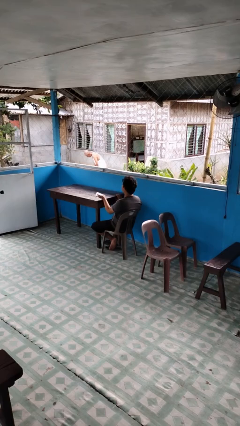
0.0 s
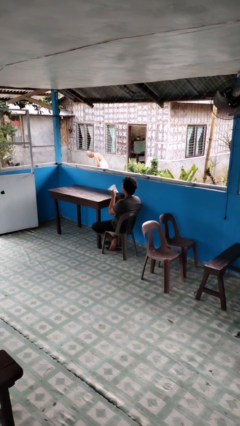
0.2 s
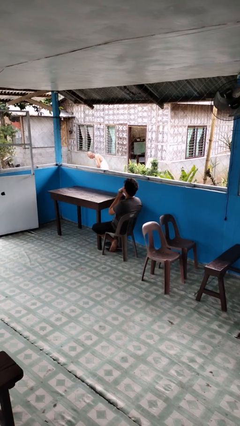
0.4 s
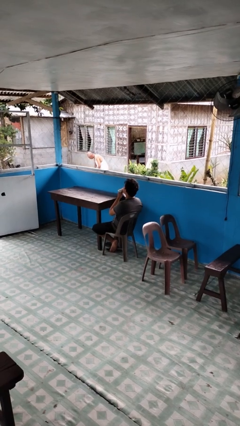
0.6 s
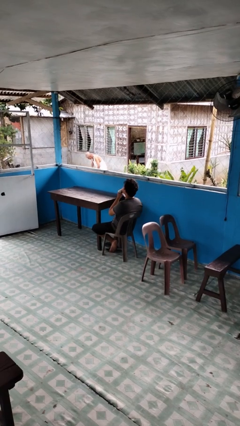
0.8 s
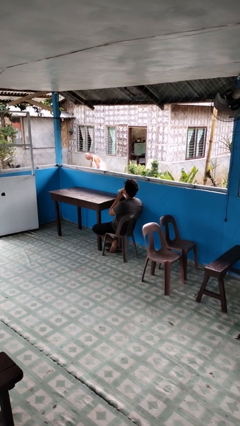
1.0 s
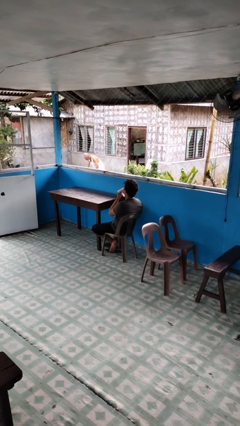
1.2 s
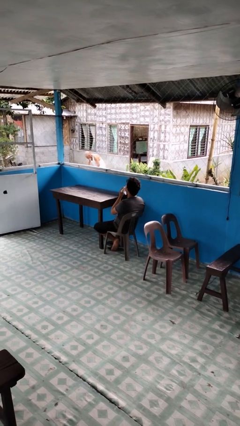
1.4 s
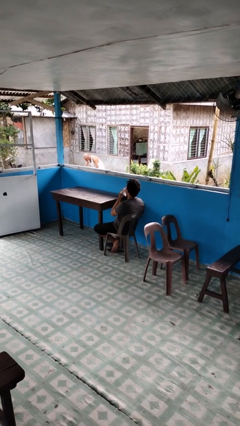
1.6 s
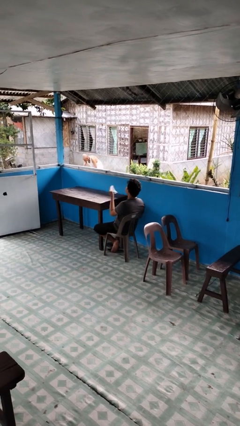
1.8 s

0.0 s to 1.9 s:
person wipes mouth with napkin

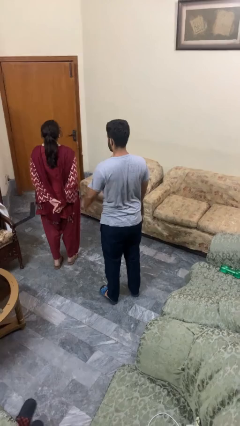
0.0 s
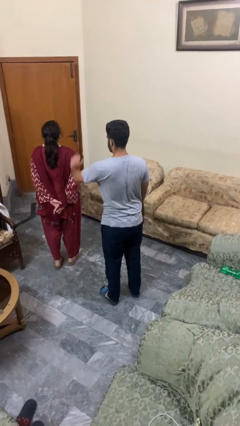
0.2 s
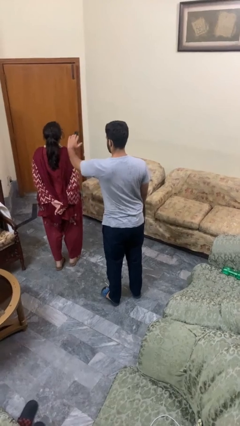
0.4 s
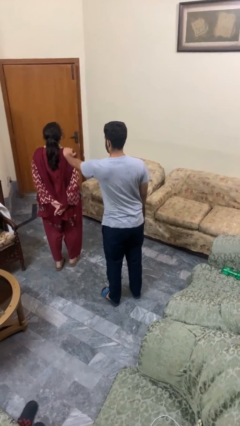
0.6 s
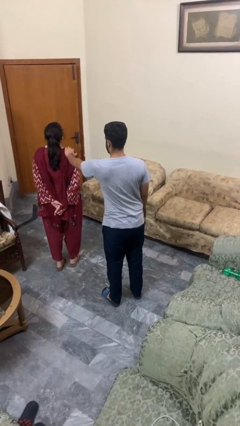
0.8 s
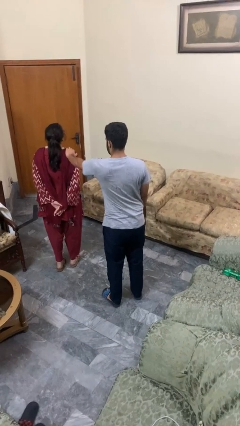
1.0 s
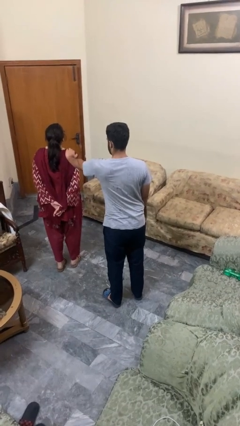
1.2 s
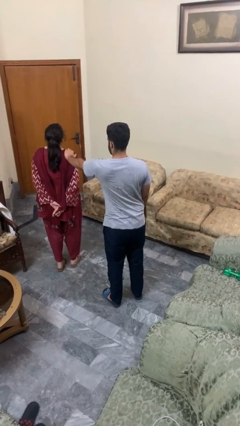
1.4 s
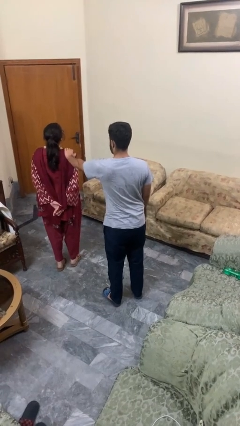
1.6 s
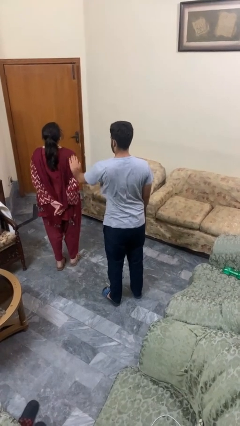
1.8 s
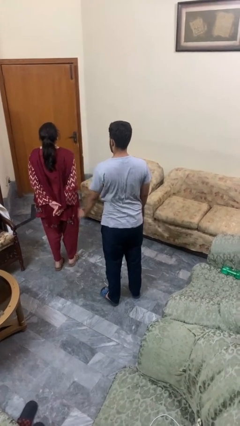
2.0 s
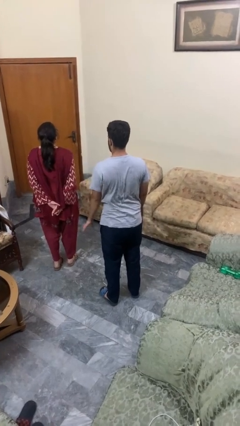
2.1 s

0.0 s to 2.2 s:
person pounds shoulders of person

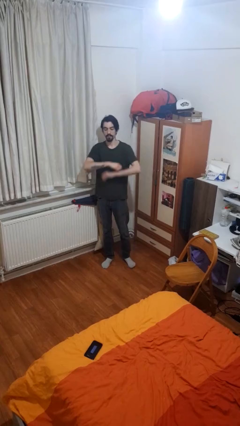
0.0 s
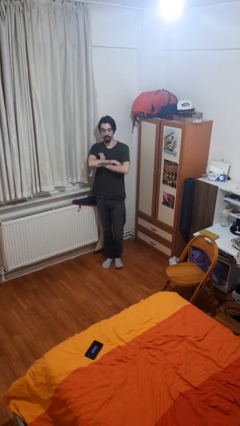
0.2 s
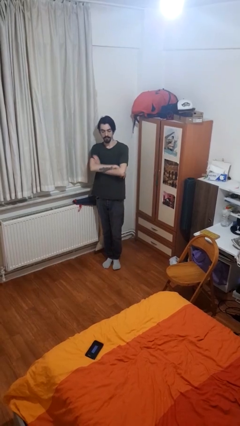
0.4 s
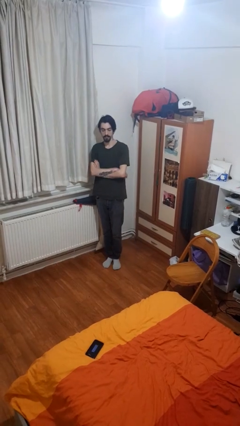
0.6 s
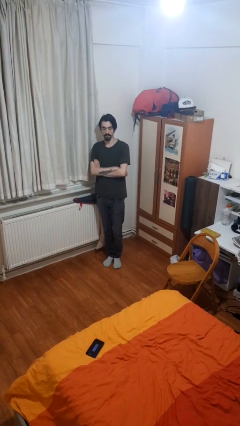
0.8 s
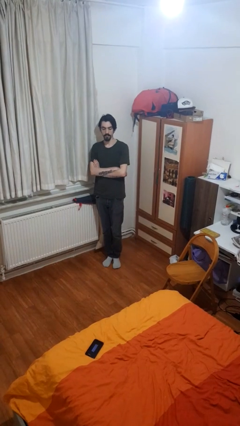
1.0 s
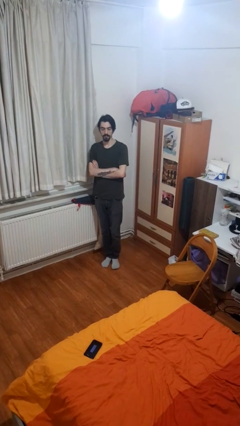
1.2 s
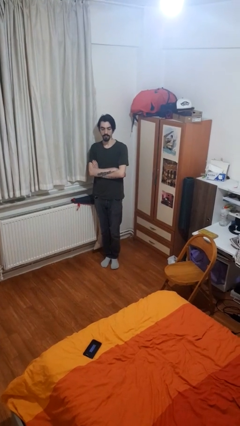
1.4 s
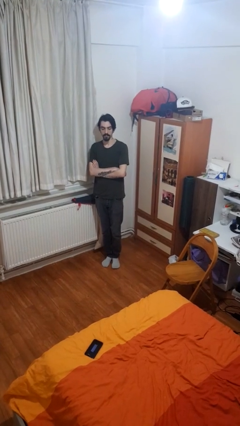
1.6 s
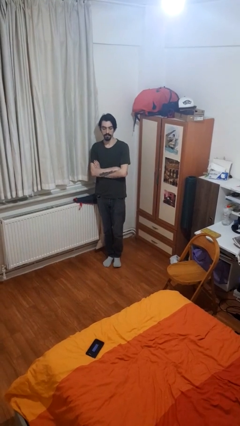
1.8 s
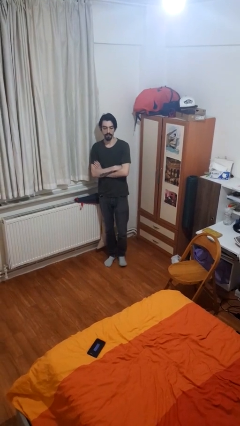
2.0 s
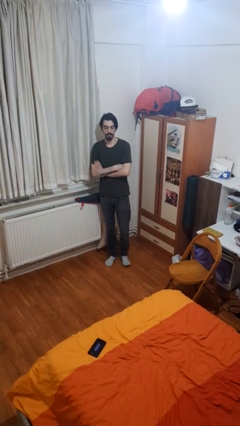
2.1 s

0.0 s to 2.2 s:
person crosses arms

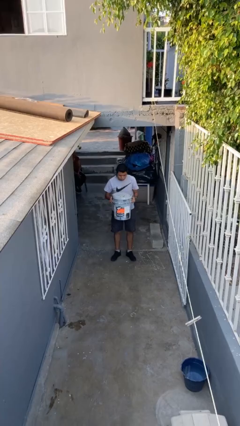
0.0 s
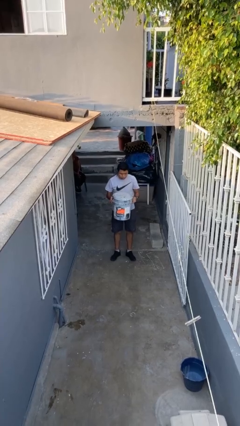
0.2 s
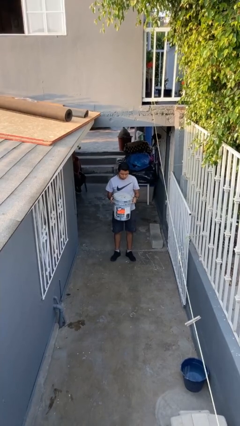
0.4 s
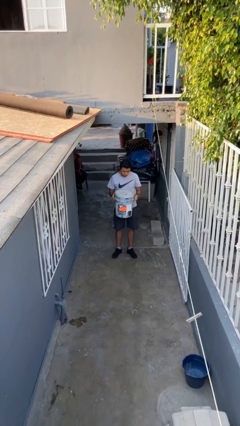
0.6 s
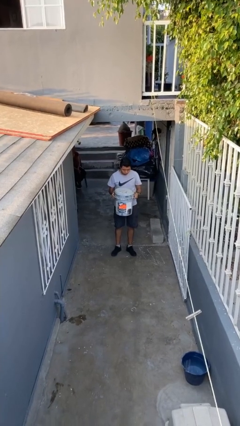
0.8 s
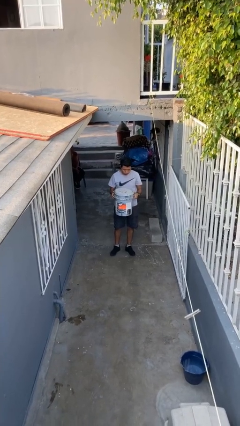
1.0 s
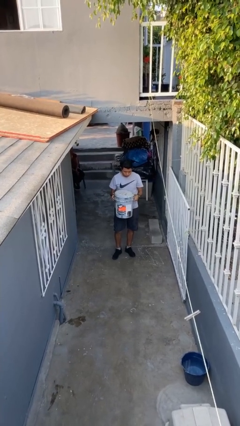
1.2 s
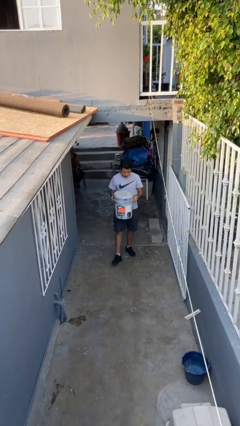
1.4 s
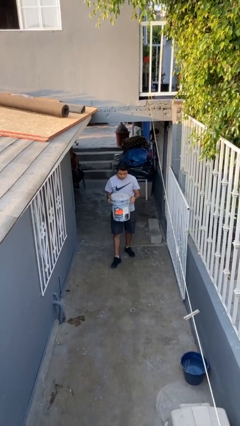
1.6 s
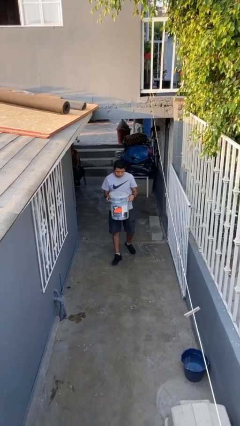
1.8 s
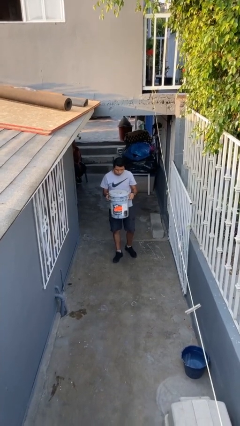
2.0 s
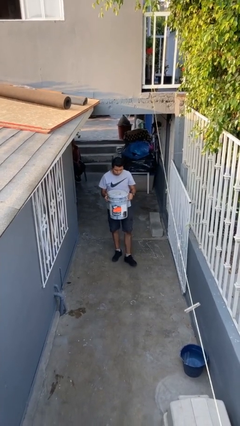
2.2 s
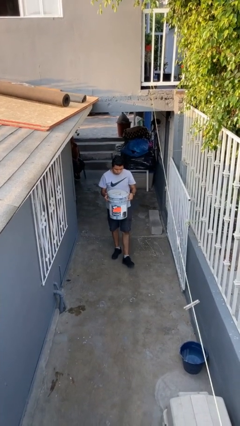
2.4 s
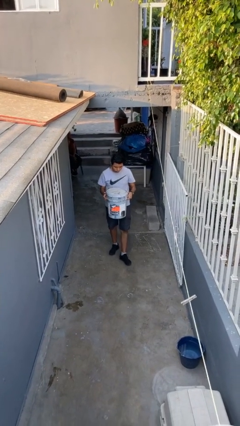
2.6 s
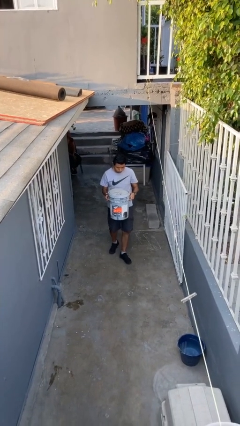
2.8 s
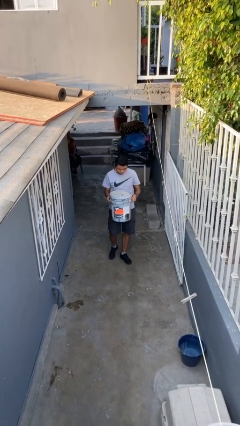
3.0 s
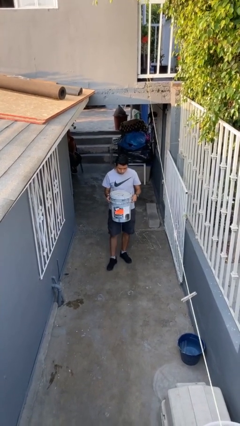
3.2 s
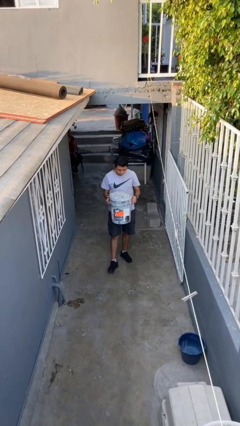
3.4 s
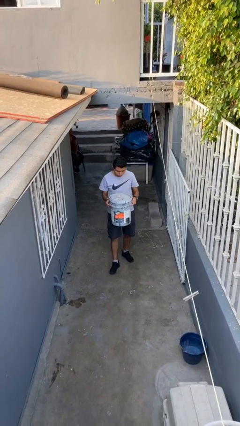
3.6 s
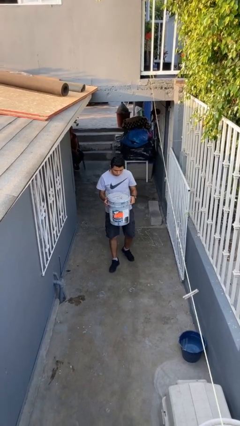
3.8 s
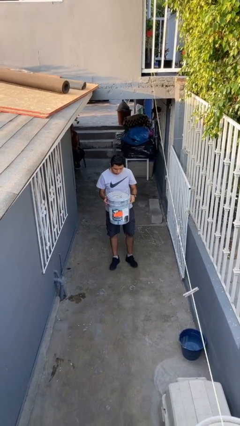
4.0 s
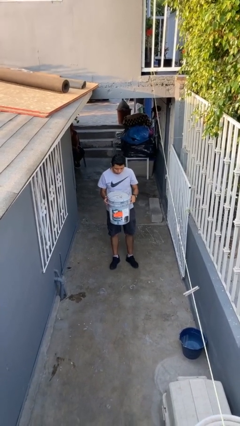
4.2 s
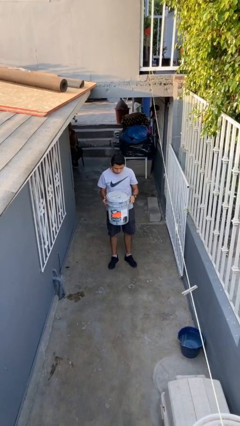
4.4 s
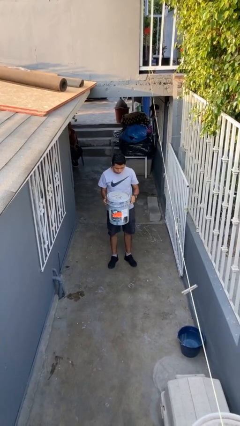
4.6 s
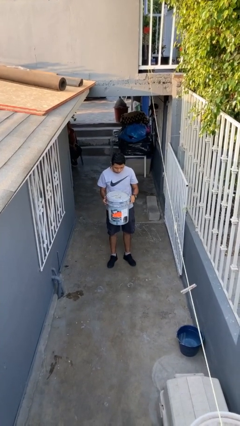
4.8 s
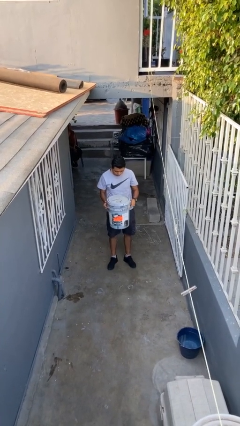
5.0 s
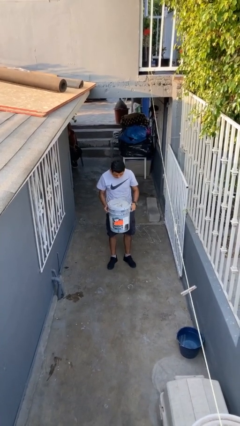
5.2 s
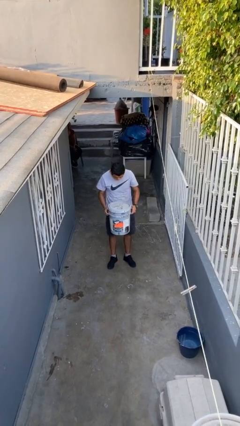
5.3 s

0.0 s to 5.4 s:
person carries heavy object

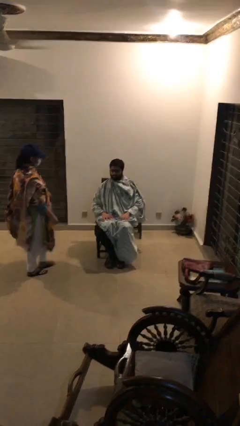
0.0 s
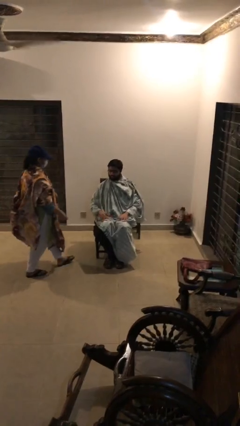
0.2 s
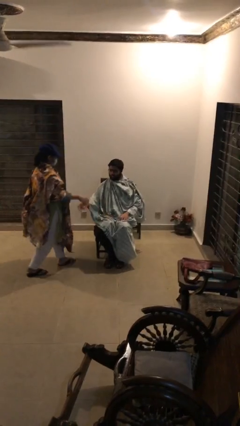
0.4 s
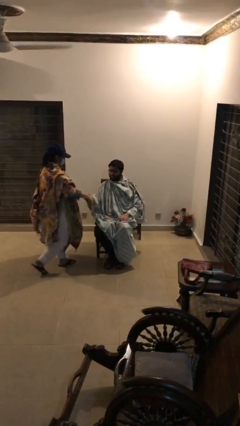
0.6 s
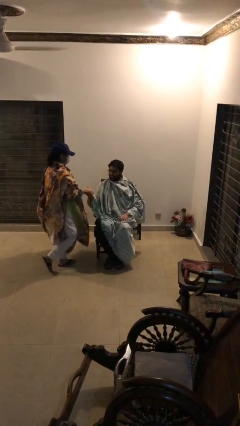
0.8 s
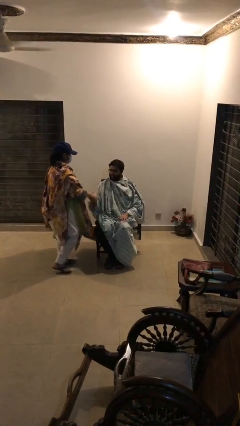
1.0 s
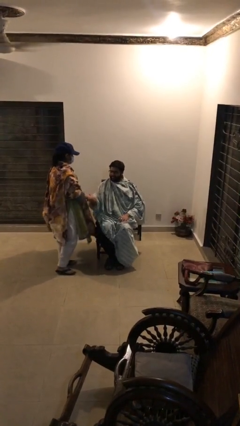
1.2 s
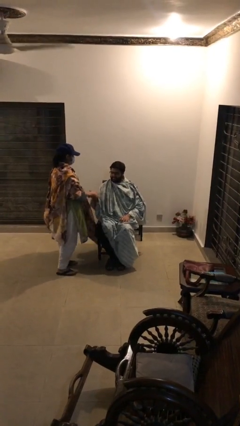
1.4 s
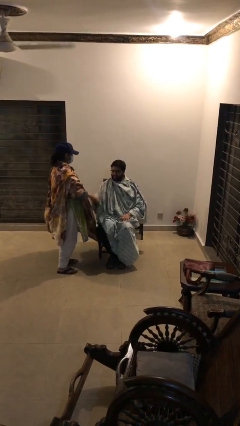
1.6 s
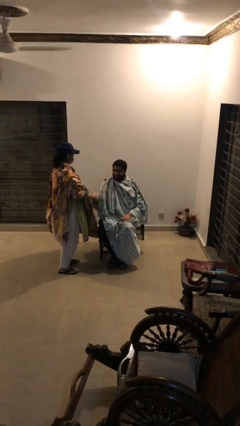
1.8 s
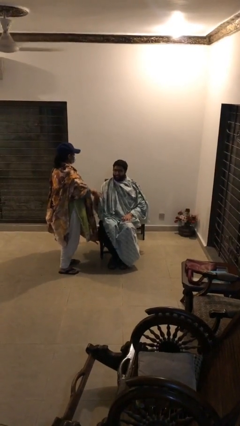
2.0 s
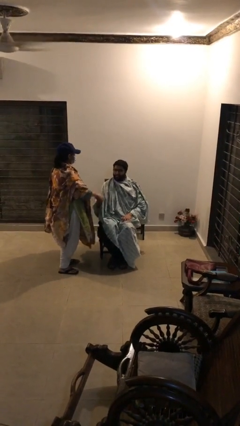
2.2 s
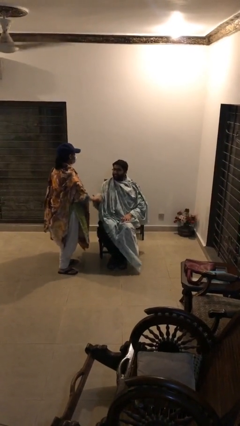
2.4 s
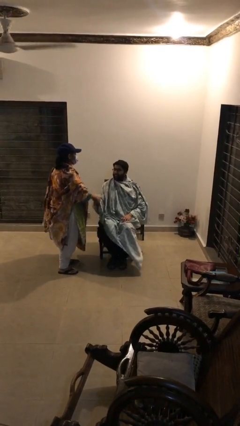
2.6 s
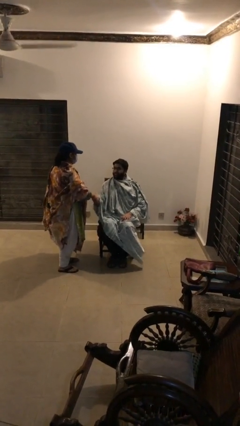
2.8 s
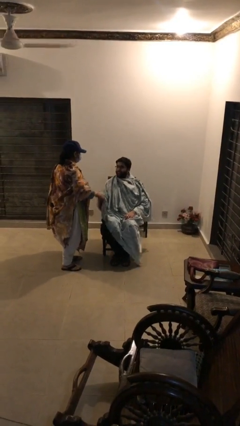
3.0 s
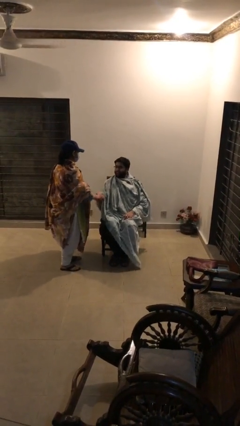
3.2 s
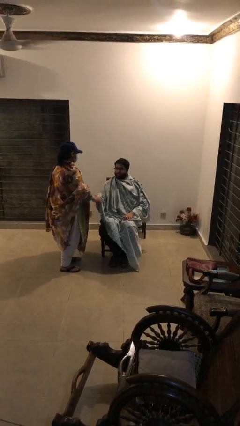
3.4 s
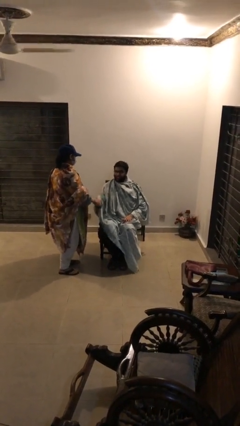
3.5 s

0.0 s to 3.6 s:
person shakes hand

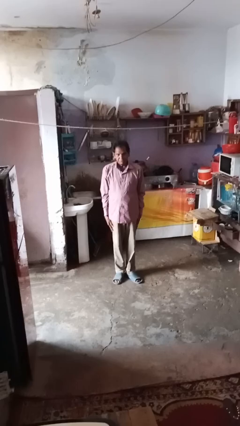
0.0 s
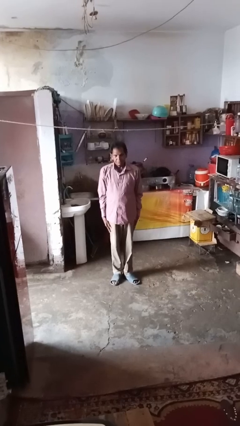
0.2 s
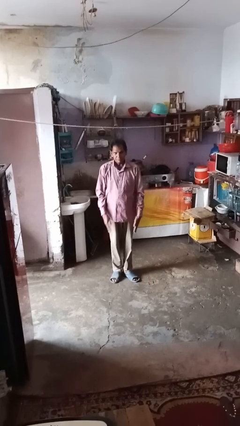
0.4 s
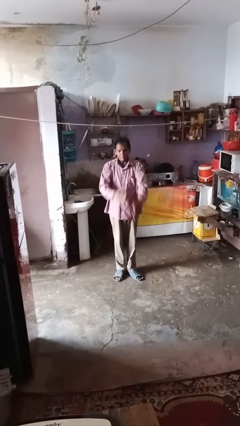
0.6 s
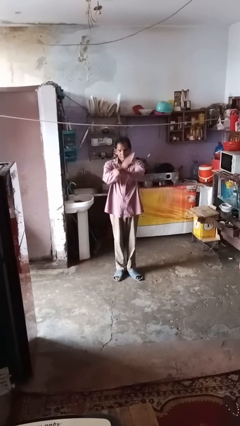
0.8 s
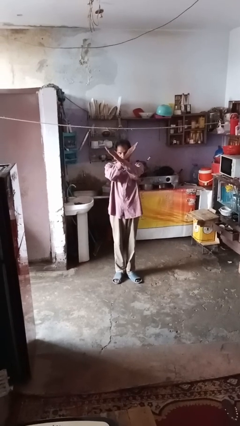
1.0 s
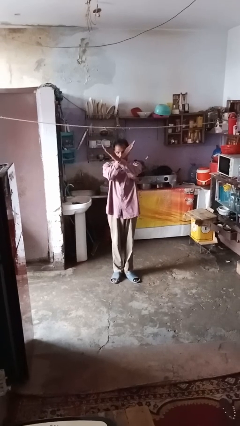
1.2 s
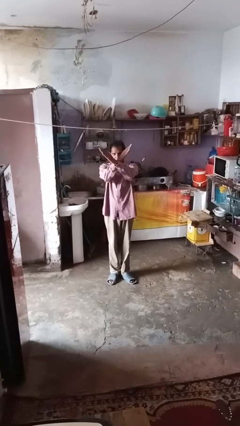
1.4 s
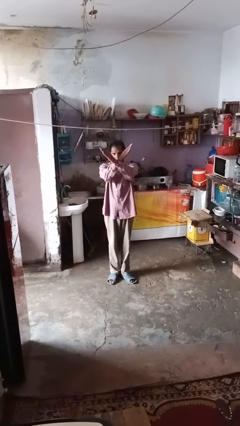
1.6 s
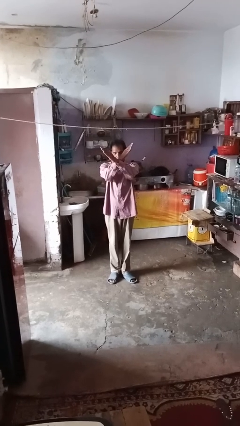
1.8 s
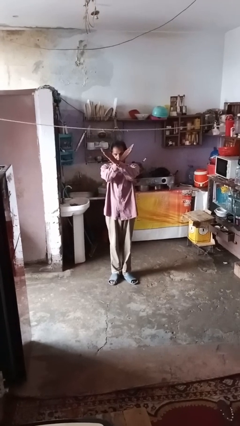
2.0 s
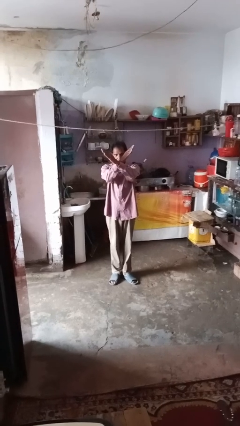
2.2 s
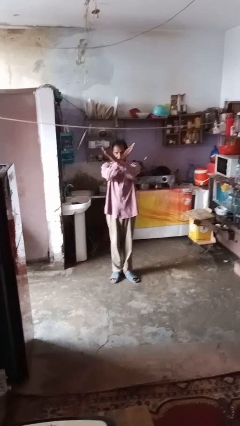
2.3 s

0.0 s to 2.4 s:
person gestures arms x

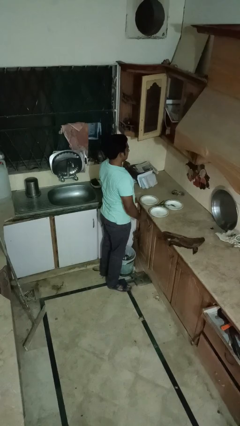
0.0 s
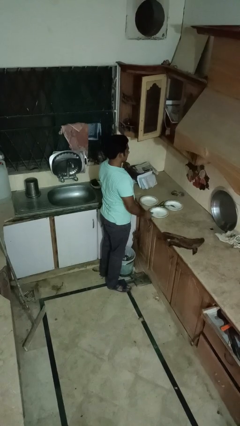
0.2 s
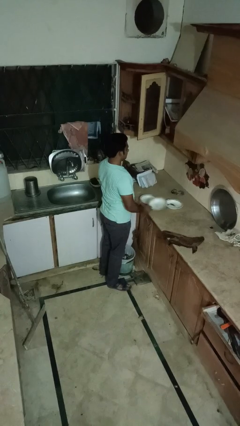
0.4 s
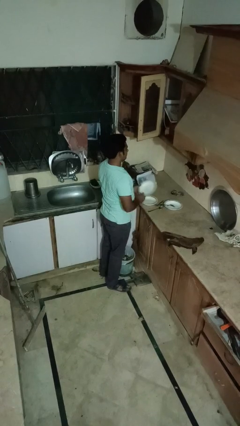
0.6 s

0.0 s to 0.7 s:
person puts object in cabinet
